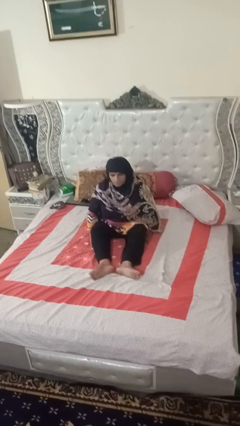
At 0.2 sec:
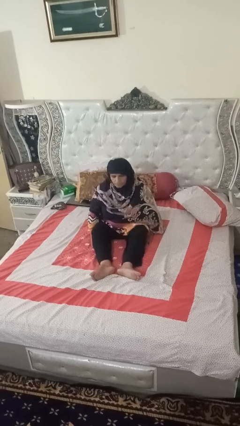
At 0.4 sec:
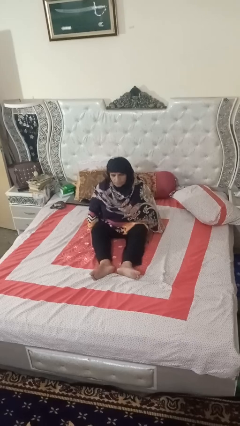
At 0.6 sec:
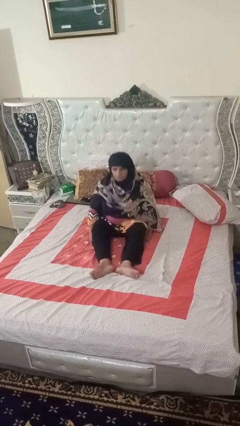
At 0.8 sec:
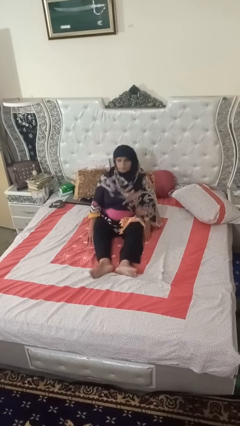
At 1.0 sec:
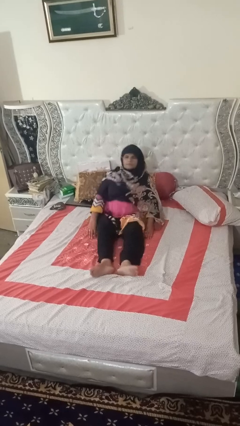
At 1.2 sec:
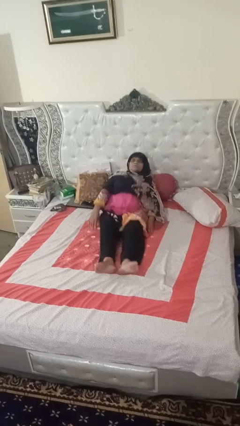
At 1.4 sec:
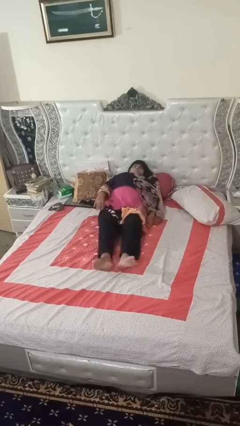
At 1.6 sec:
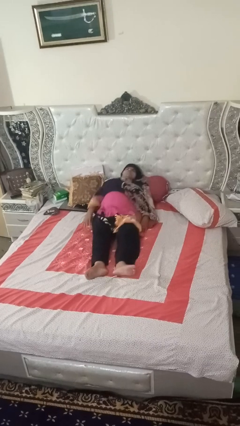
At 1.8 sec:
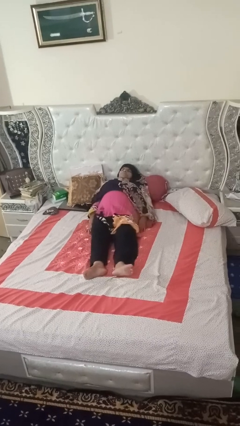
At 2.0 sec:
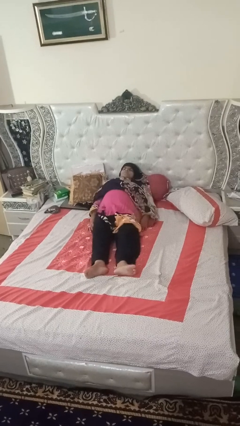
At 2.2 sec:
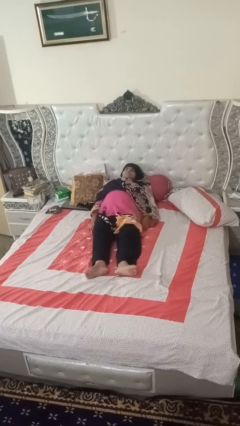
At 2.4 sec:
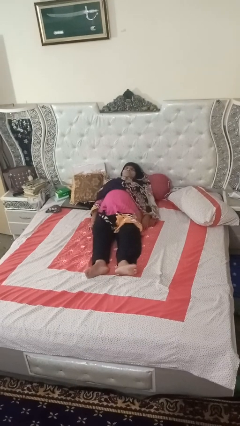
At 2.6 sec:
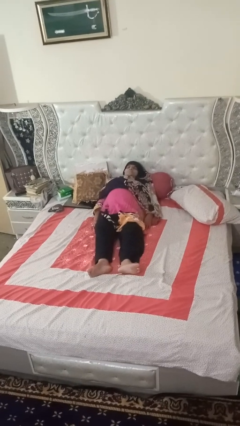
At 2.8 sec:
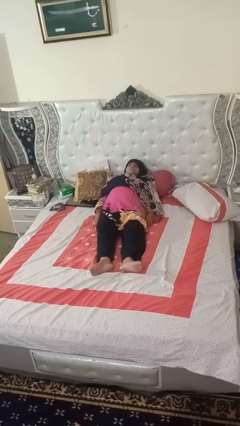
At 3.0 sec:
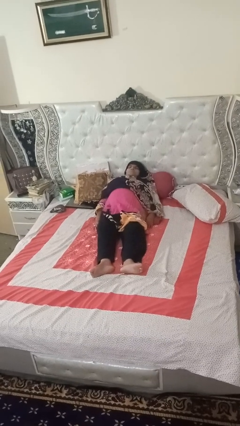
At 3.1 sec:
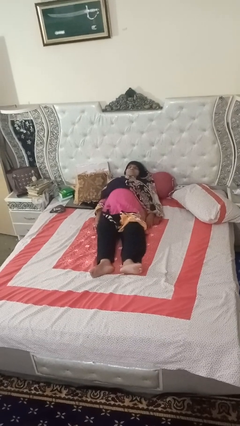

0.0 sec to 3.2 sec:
person lies down on bed

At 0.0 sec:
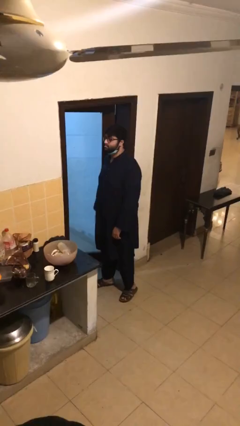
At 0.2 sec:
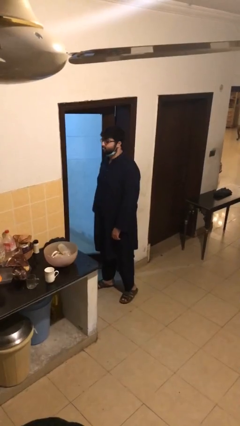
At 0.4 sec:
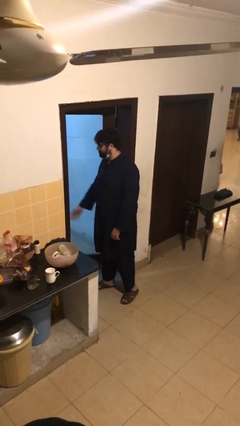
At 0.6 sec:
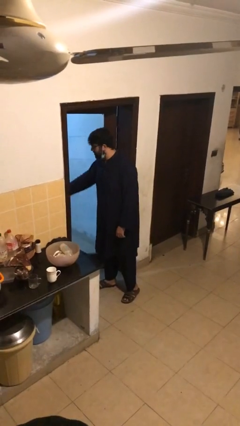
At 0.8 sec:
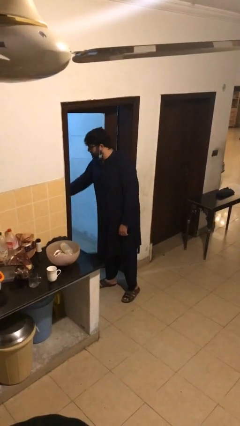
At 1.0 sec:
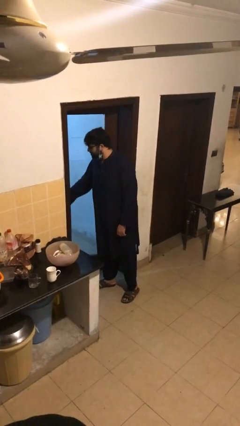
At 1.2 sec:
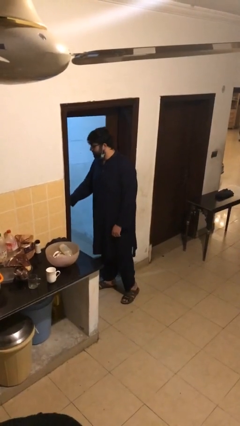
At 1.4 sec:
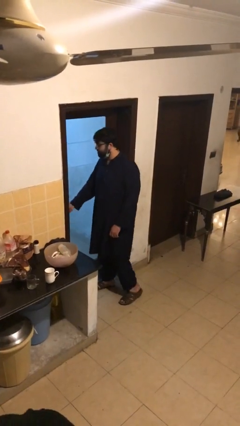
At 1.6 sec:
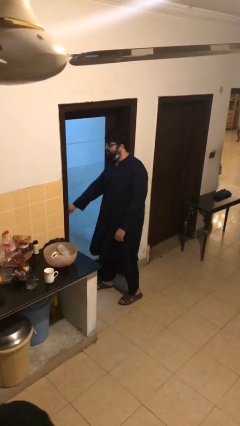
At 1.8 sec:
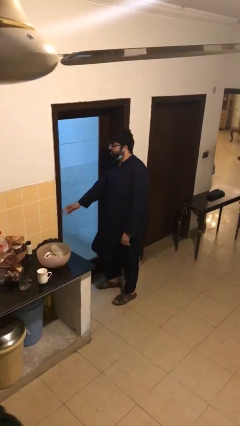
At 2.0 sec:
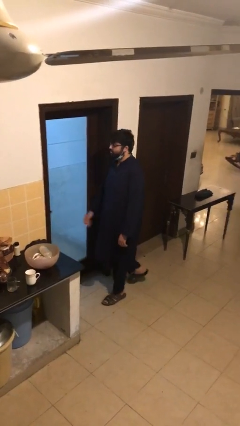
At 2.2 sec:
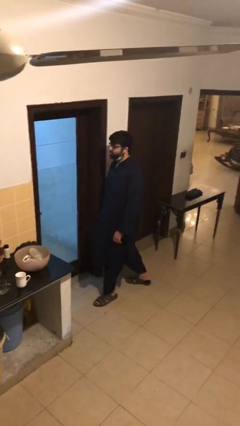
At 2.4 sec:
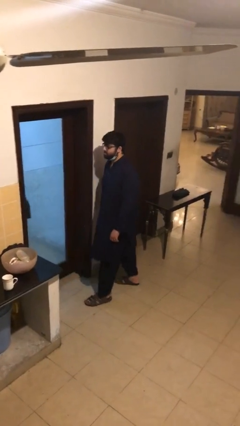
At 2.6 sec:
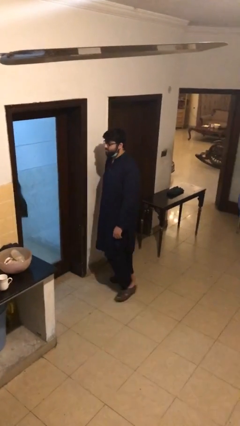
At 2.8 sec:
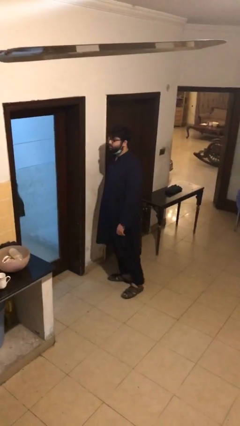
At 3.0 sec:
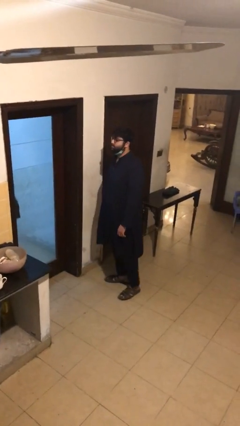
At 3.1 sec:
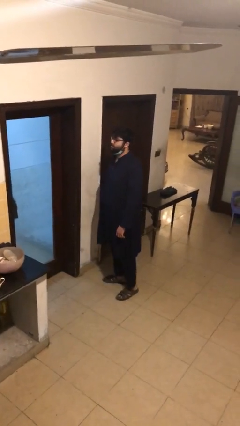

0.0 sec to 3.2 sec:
person closes facility door

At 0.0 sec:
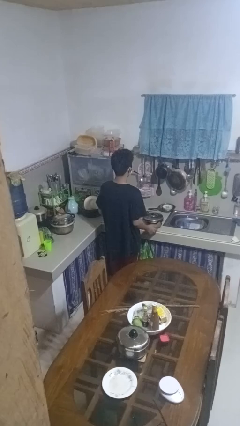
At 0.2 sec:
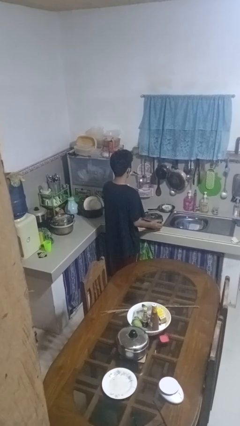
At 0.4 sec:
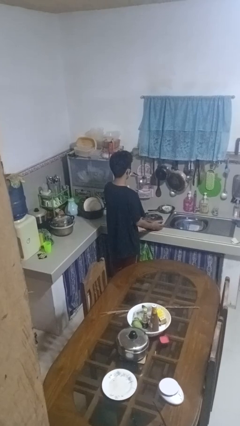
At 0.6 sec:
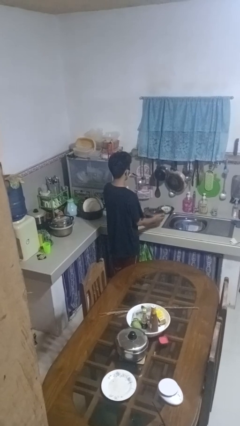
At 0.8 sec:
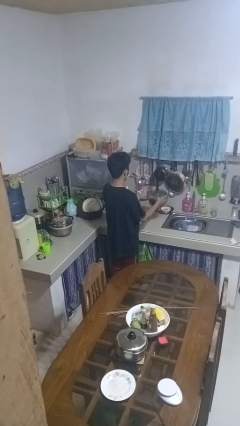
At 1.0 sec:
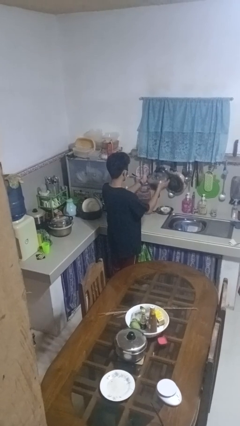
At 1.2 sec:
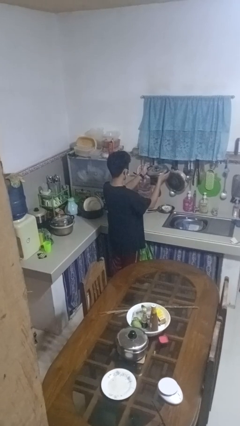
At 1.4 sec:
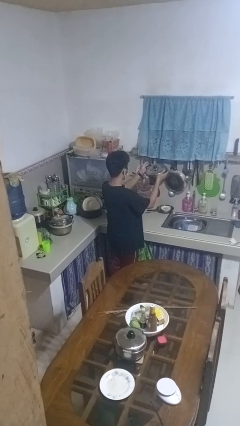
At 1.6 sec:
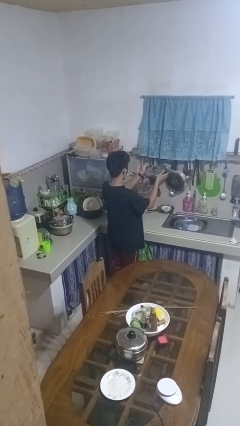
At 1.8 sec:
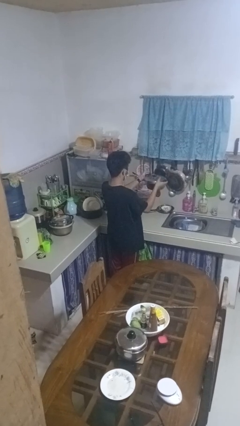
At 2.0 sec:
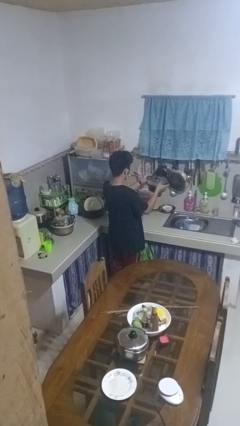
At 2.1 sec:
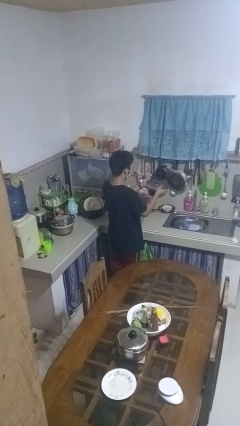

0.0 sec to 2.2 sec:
person picks up object from countertop

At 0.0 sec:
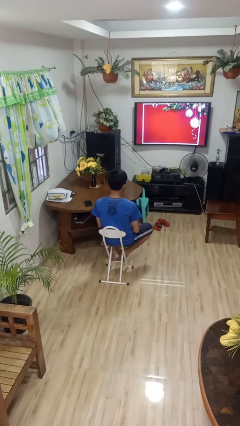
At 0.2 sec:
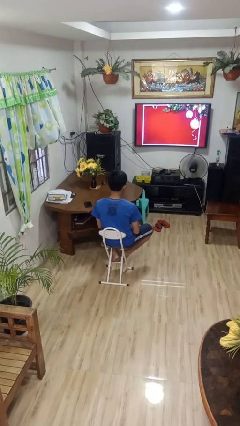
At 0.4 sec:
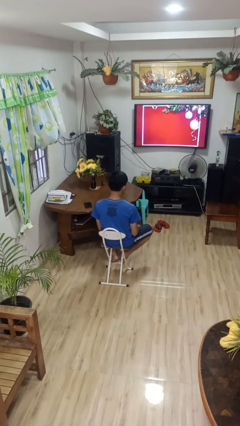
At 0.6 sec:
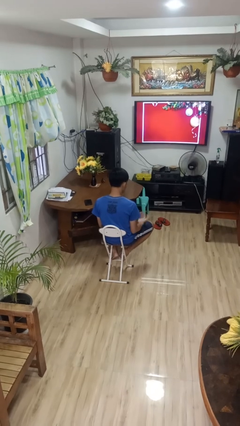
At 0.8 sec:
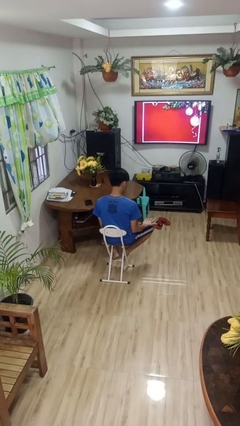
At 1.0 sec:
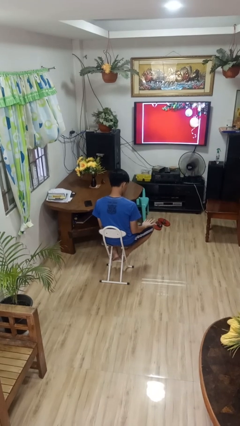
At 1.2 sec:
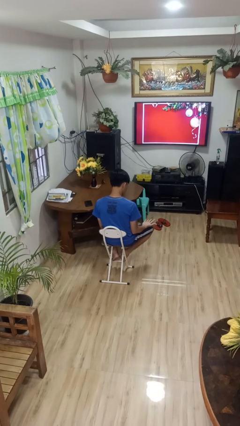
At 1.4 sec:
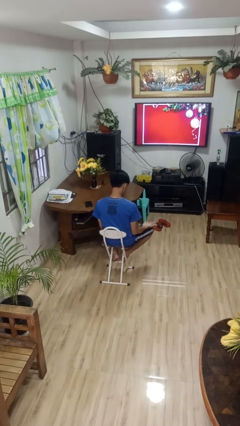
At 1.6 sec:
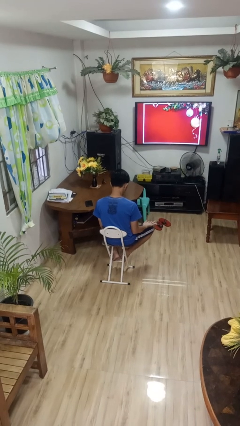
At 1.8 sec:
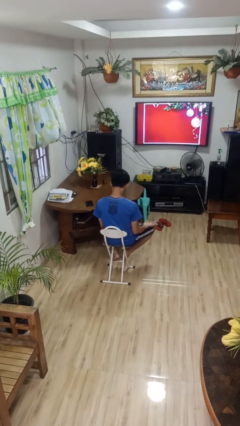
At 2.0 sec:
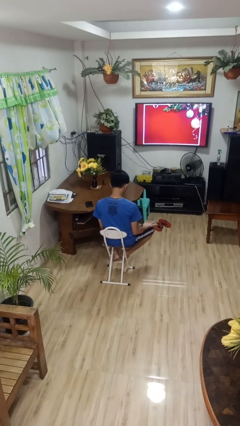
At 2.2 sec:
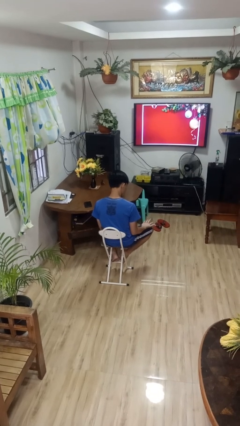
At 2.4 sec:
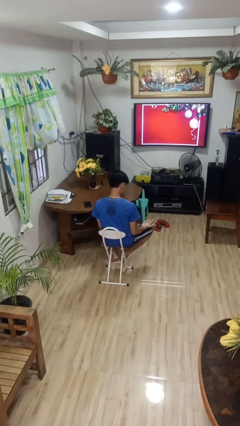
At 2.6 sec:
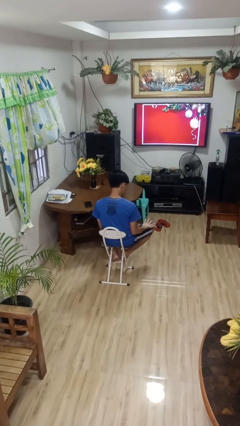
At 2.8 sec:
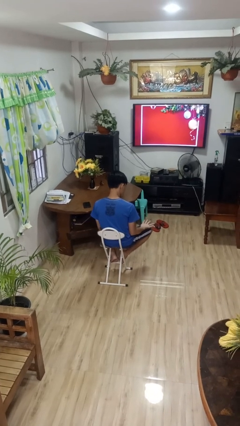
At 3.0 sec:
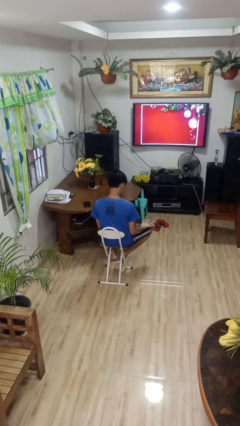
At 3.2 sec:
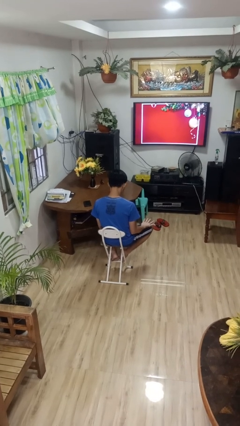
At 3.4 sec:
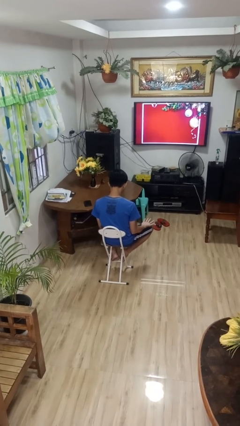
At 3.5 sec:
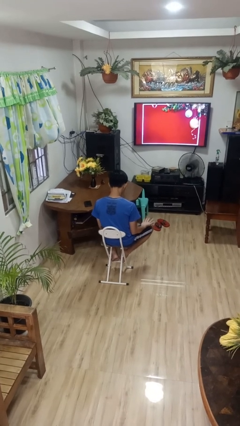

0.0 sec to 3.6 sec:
person looks at hands in lap

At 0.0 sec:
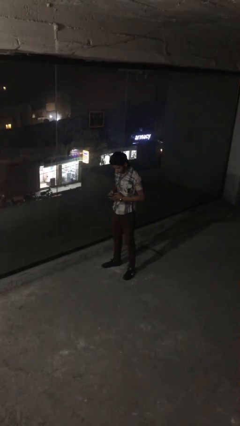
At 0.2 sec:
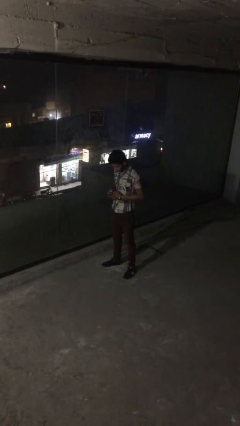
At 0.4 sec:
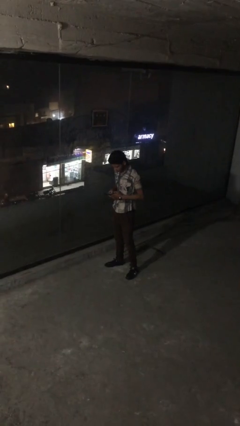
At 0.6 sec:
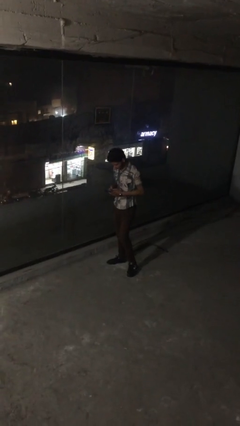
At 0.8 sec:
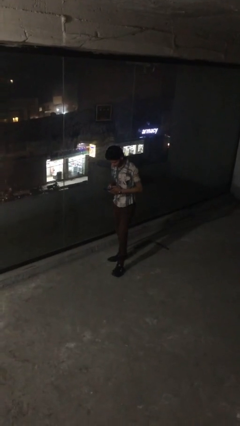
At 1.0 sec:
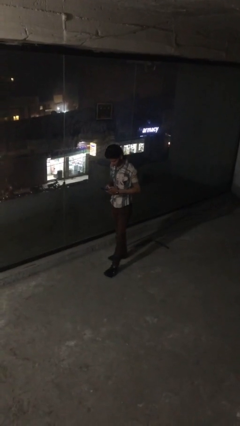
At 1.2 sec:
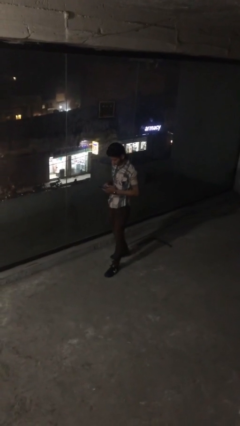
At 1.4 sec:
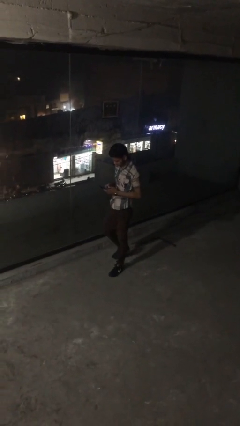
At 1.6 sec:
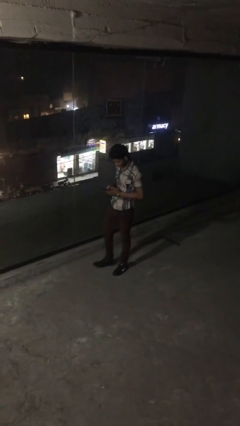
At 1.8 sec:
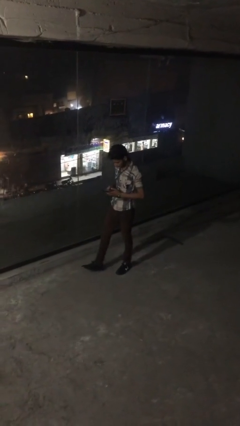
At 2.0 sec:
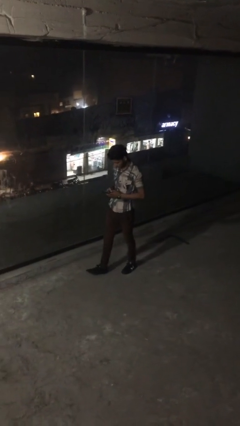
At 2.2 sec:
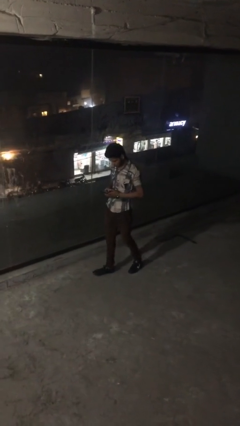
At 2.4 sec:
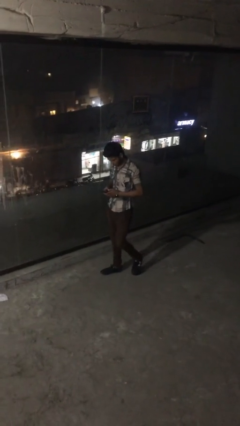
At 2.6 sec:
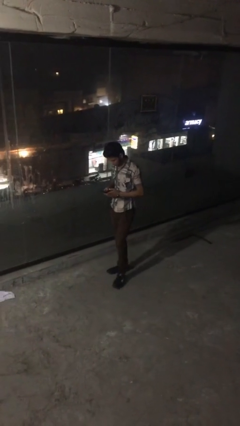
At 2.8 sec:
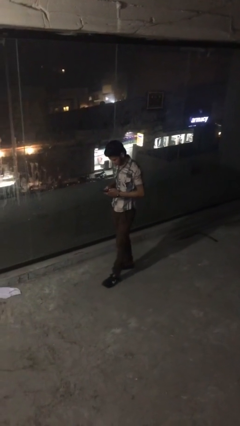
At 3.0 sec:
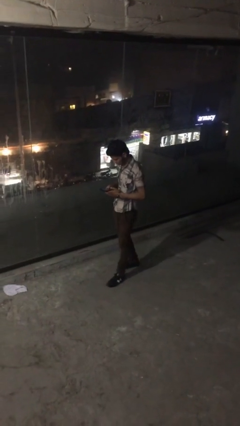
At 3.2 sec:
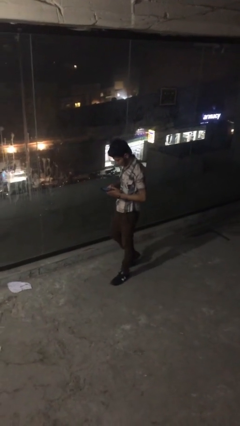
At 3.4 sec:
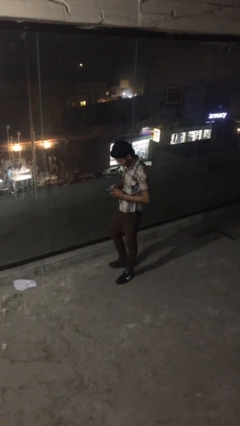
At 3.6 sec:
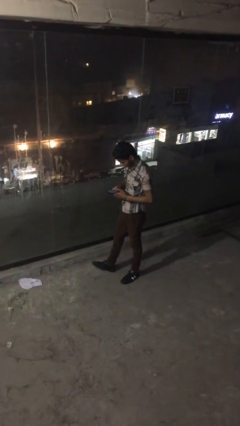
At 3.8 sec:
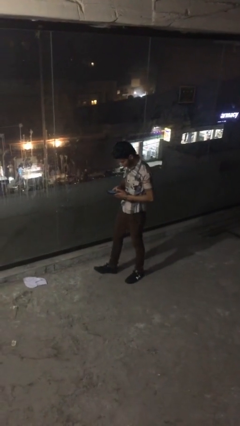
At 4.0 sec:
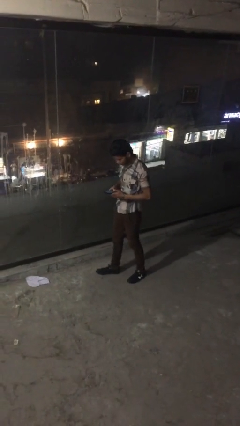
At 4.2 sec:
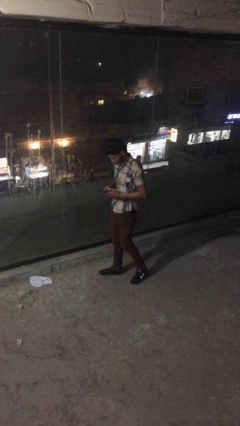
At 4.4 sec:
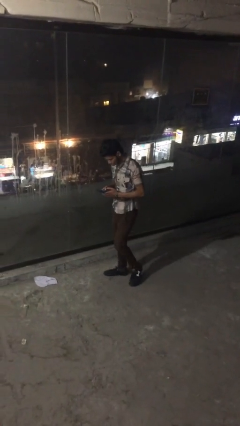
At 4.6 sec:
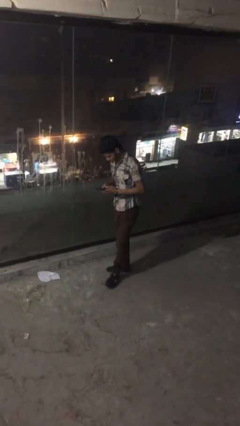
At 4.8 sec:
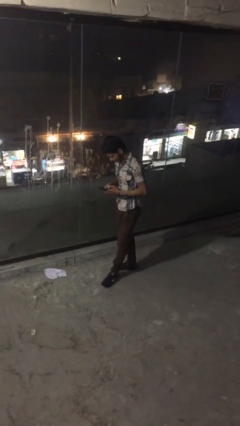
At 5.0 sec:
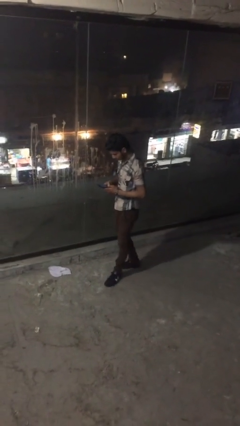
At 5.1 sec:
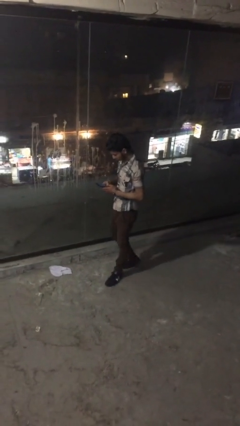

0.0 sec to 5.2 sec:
person texts on phone
